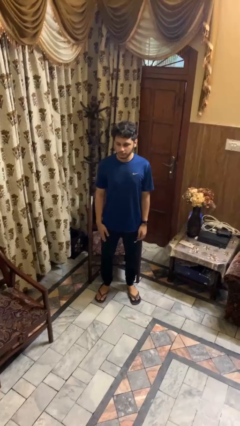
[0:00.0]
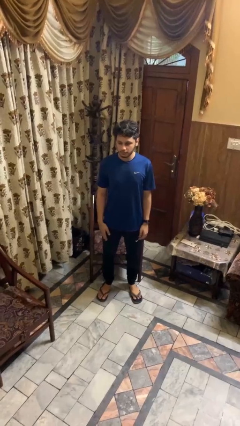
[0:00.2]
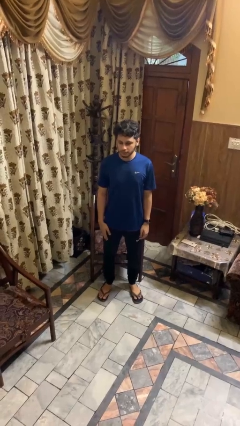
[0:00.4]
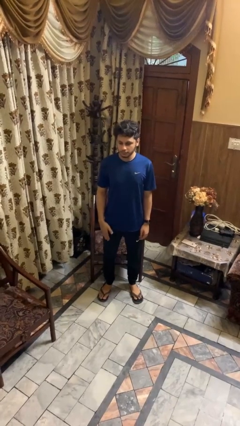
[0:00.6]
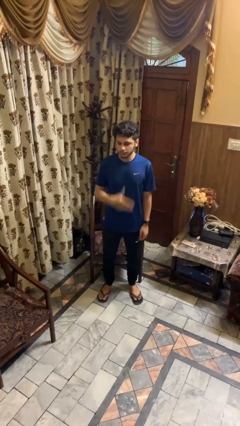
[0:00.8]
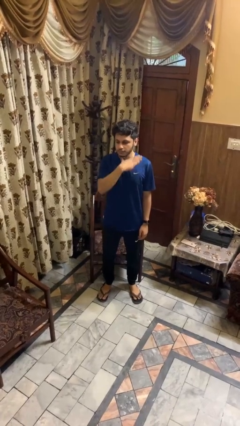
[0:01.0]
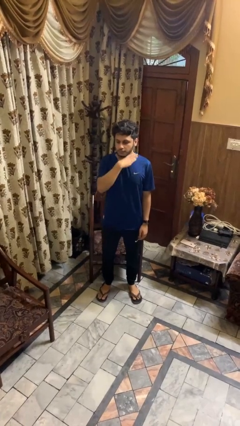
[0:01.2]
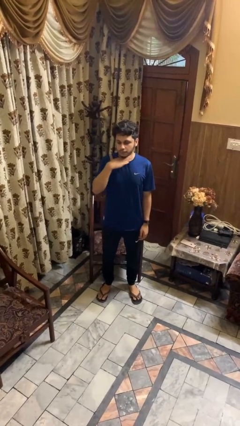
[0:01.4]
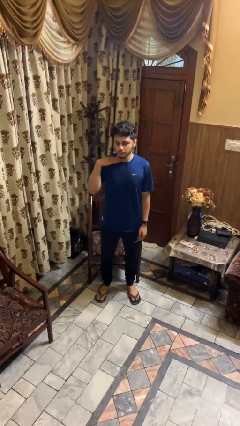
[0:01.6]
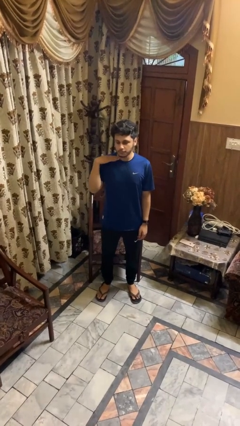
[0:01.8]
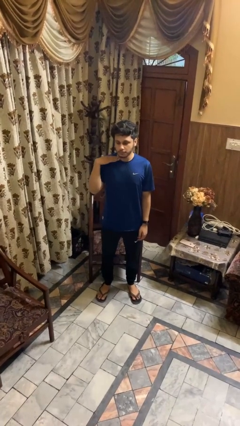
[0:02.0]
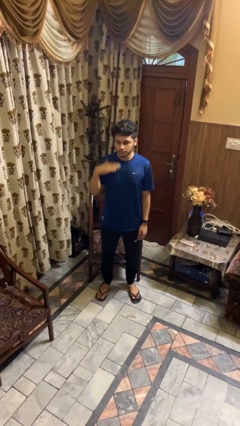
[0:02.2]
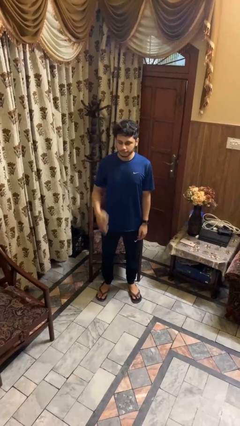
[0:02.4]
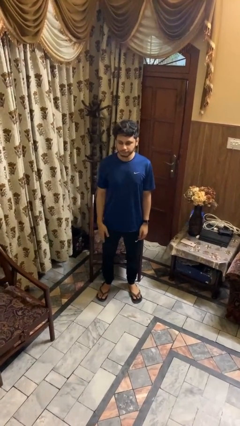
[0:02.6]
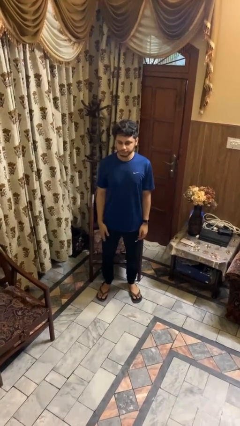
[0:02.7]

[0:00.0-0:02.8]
person gestures cut

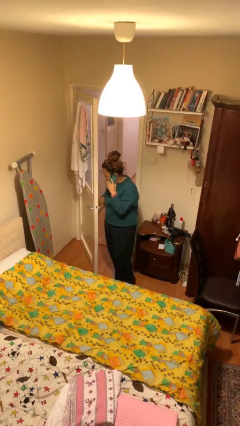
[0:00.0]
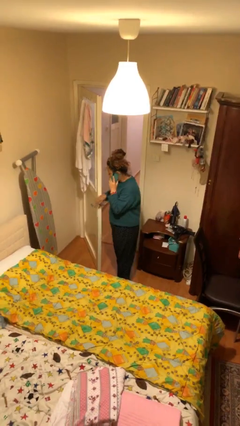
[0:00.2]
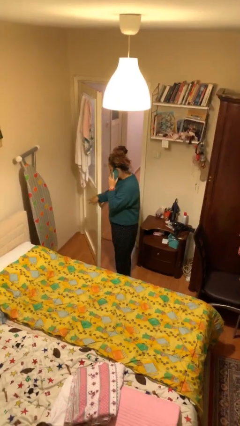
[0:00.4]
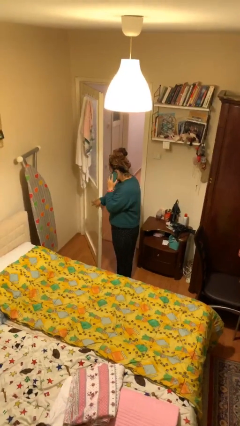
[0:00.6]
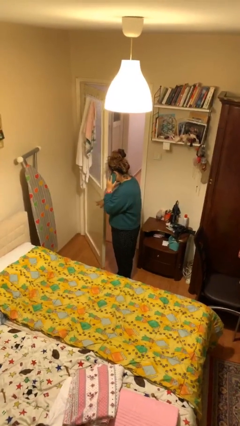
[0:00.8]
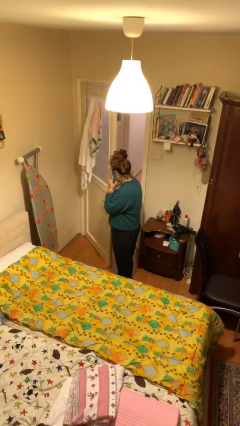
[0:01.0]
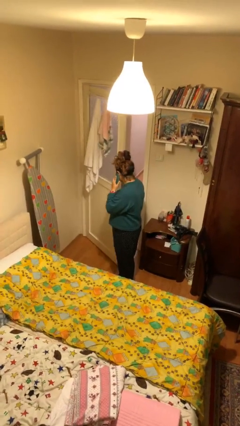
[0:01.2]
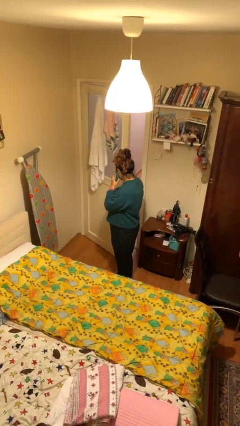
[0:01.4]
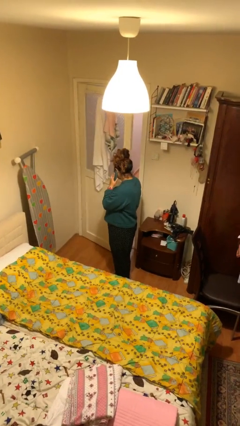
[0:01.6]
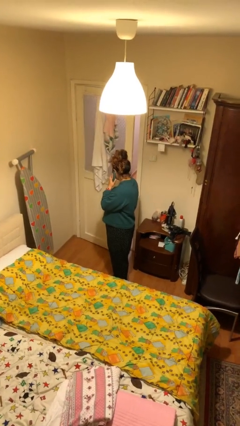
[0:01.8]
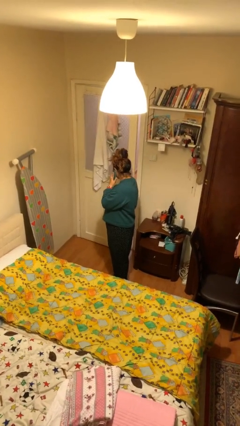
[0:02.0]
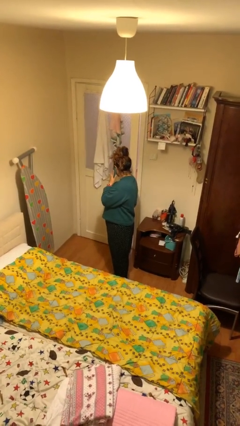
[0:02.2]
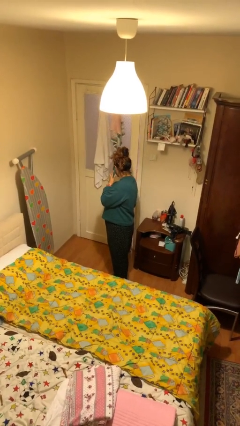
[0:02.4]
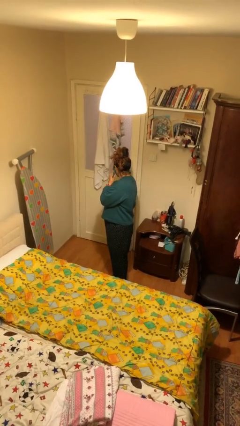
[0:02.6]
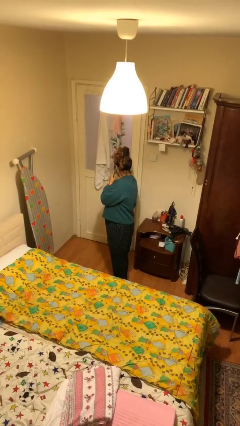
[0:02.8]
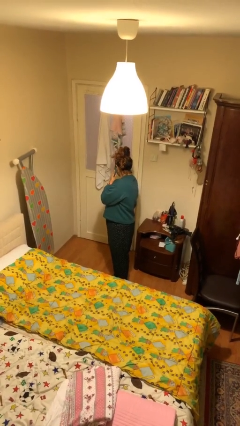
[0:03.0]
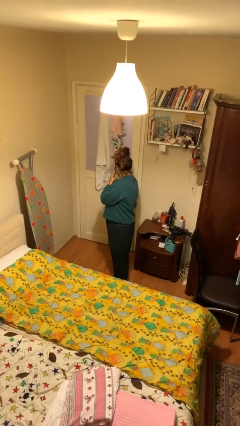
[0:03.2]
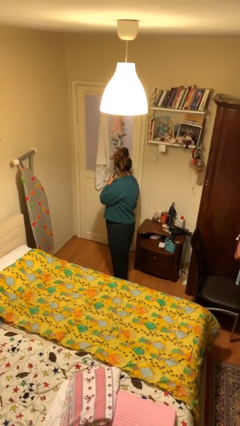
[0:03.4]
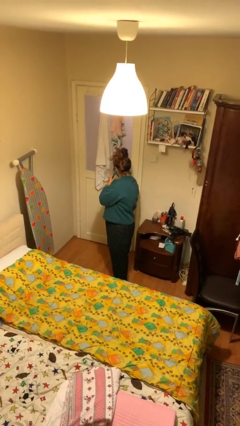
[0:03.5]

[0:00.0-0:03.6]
person closes facility door

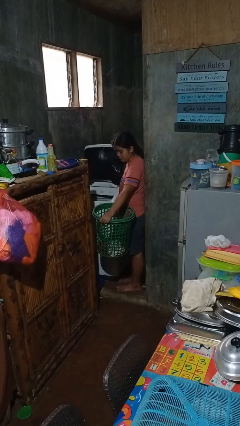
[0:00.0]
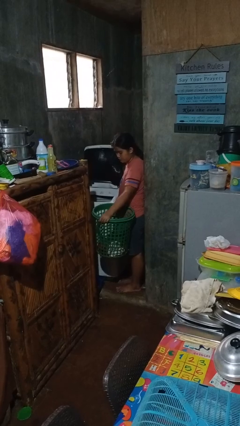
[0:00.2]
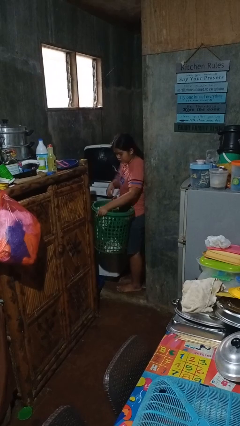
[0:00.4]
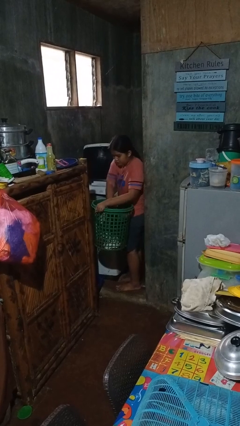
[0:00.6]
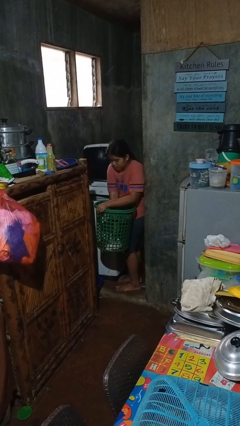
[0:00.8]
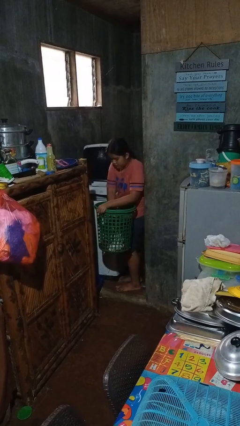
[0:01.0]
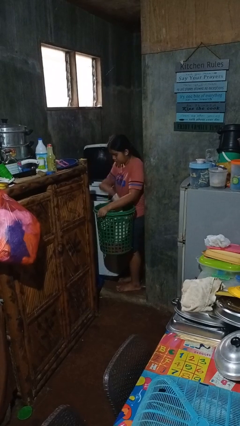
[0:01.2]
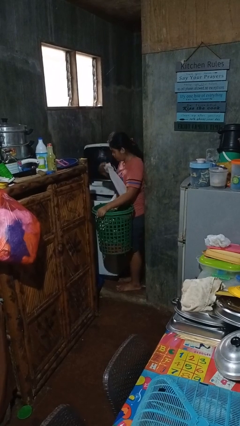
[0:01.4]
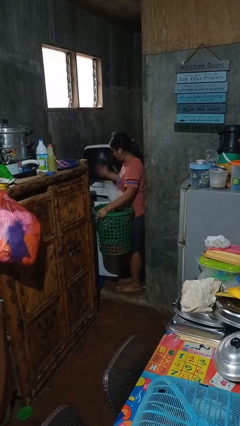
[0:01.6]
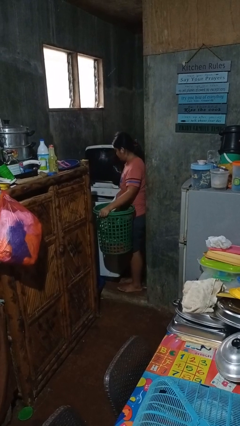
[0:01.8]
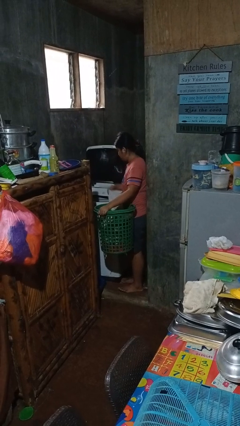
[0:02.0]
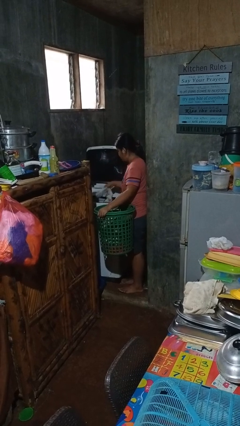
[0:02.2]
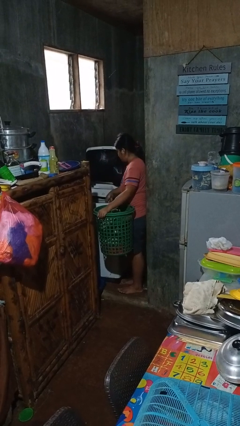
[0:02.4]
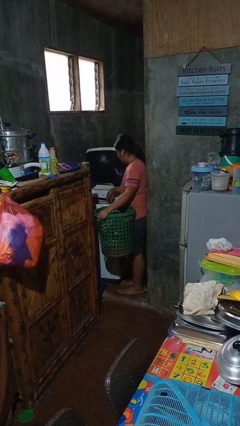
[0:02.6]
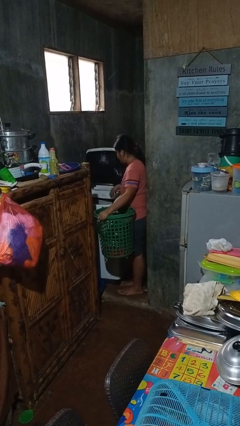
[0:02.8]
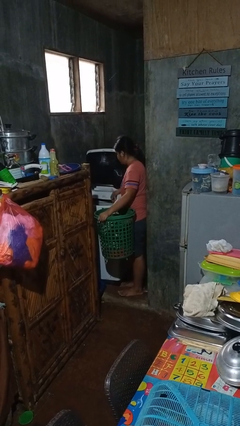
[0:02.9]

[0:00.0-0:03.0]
person loads clotheswasher

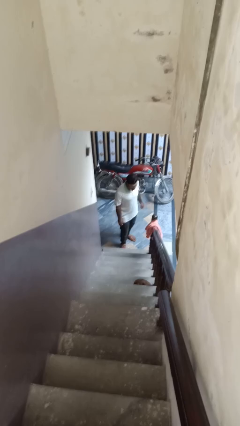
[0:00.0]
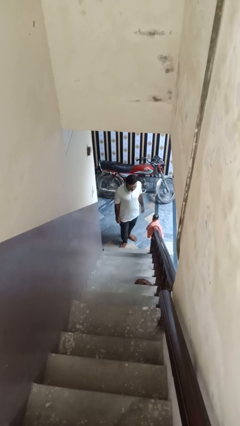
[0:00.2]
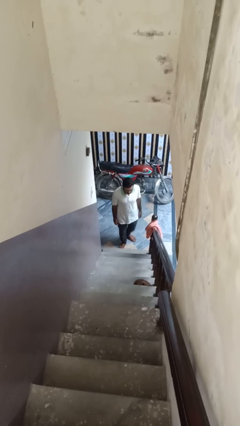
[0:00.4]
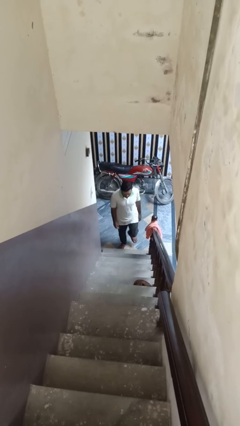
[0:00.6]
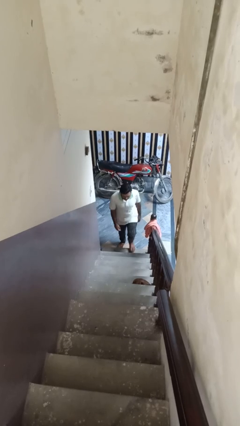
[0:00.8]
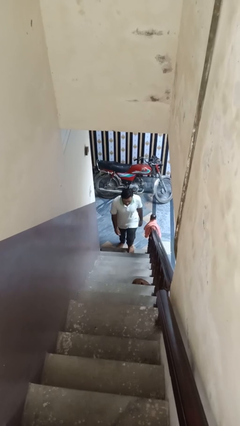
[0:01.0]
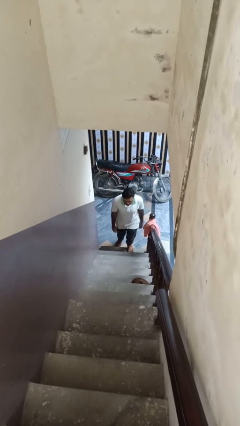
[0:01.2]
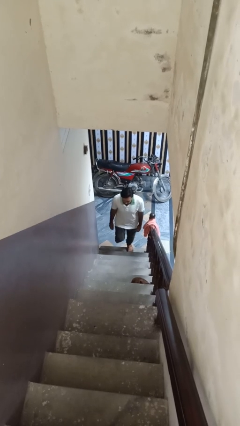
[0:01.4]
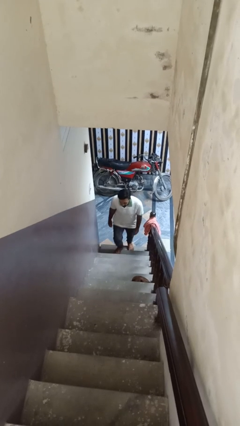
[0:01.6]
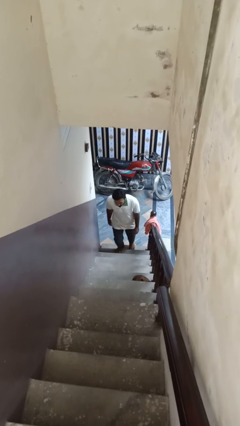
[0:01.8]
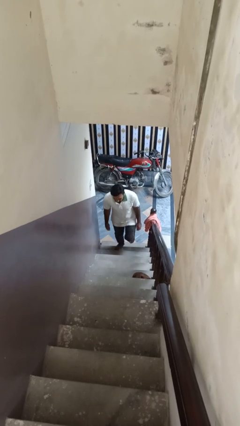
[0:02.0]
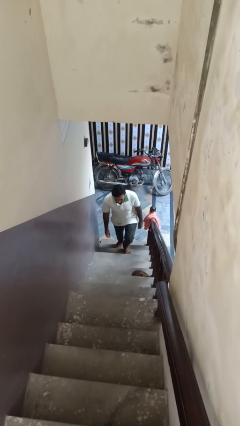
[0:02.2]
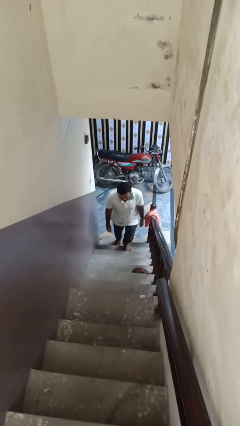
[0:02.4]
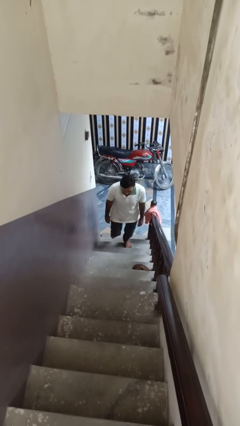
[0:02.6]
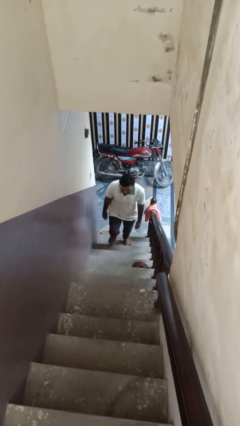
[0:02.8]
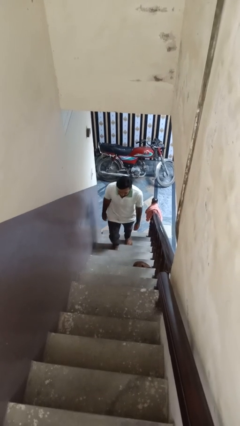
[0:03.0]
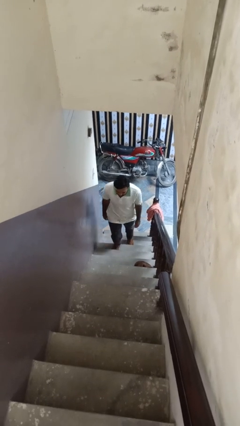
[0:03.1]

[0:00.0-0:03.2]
person climbs up ladder

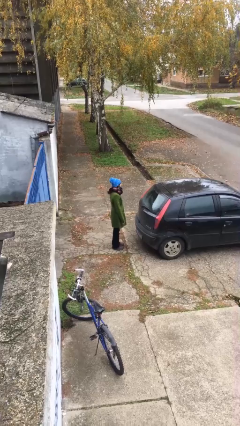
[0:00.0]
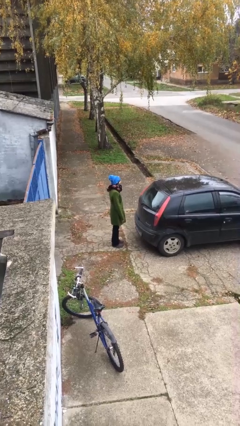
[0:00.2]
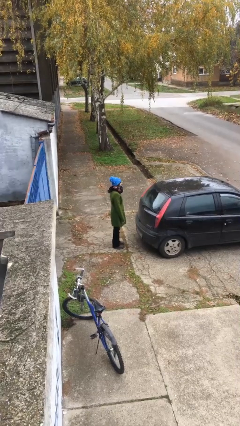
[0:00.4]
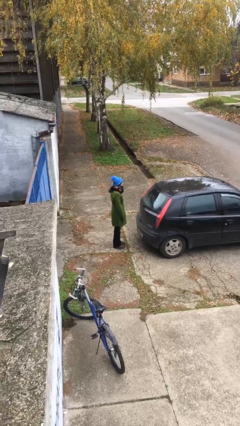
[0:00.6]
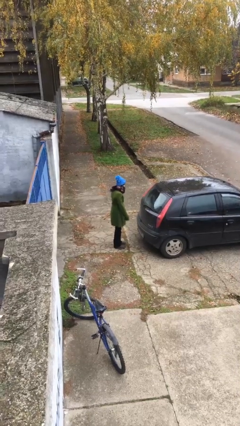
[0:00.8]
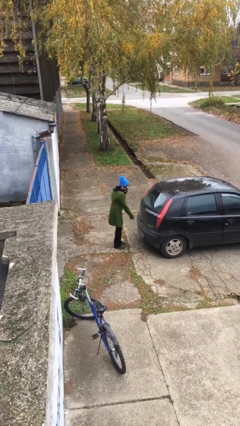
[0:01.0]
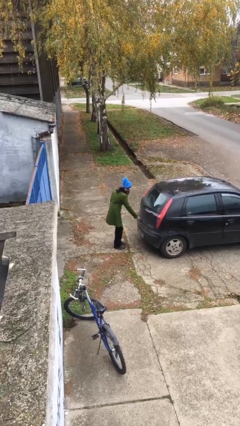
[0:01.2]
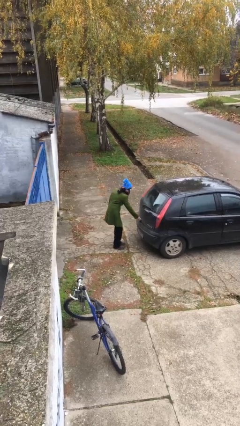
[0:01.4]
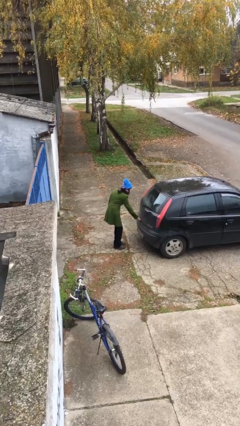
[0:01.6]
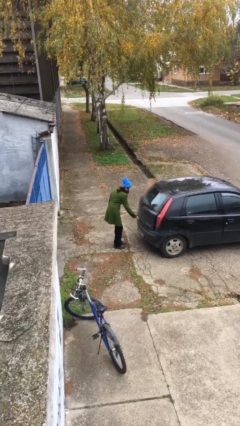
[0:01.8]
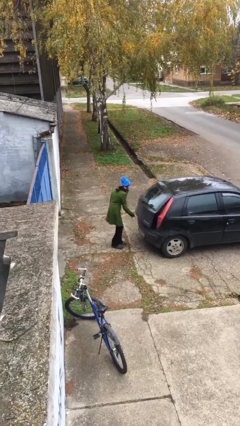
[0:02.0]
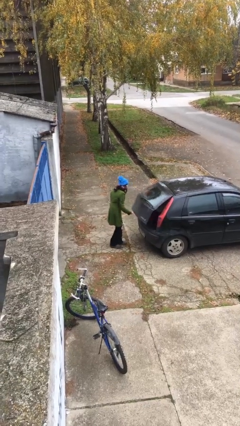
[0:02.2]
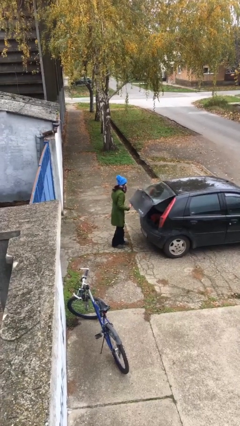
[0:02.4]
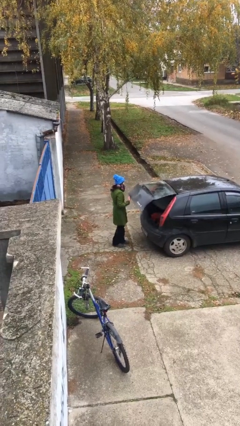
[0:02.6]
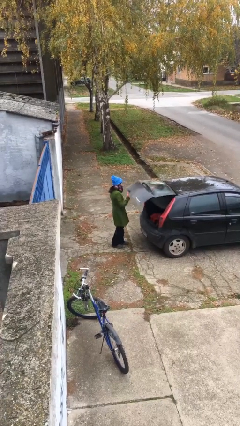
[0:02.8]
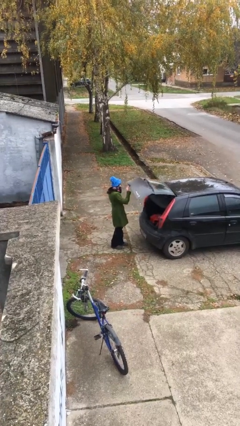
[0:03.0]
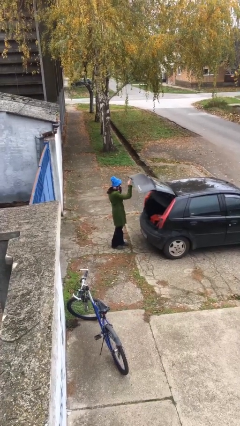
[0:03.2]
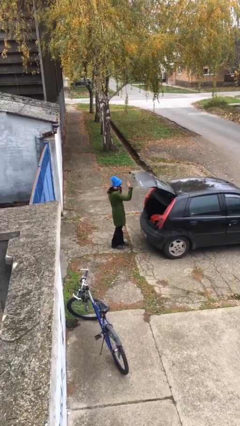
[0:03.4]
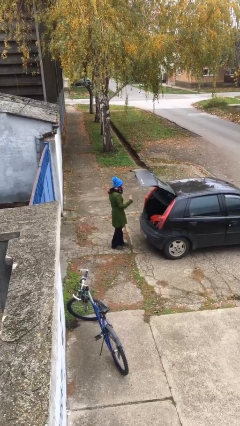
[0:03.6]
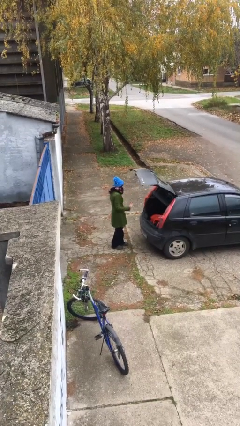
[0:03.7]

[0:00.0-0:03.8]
person opens car trunk

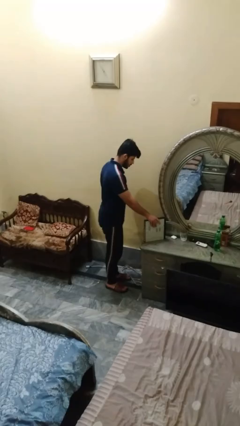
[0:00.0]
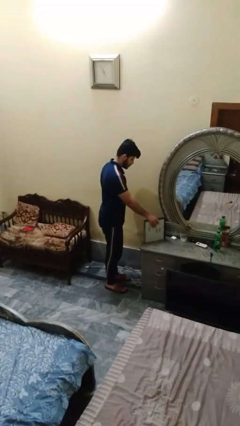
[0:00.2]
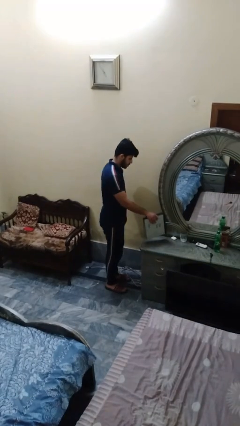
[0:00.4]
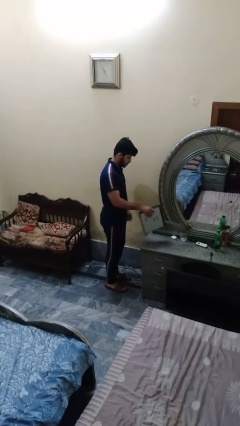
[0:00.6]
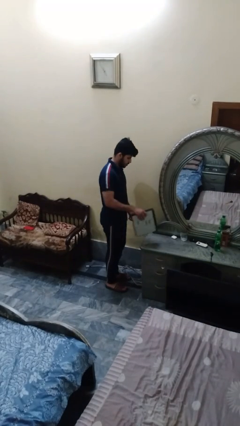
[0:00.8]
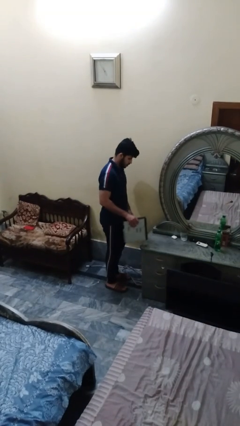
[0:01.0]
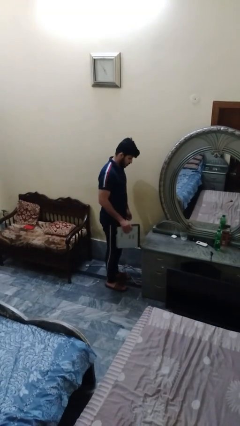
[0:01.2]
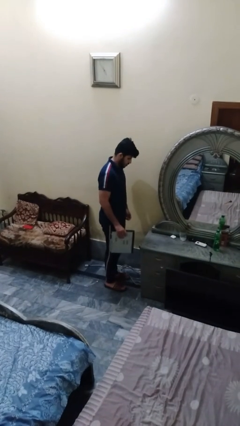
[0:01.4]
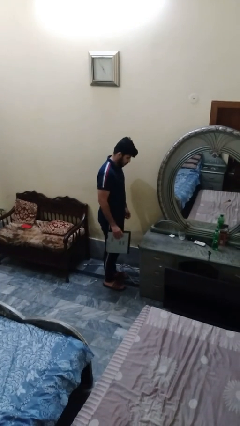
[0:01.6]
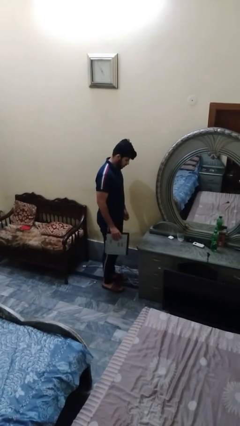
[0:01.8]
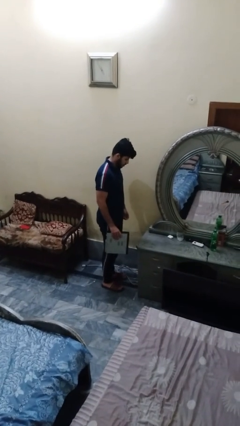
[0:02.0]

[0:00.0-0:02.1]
person picks up object from countertop
